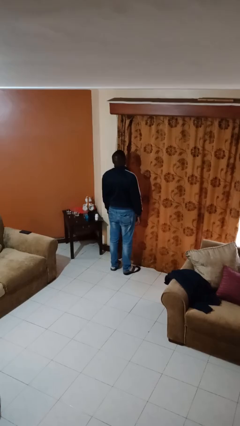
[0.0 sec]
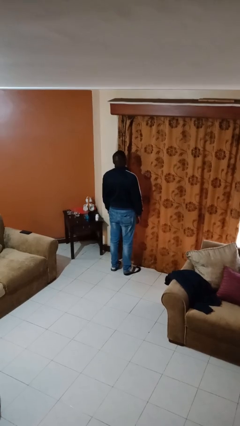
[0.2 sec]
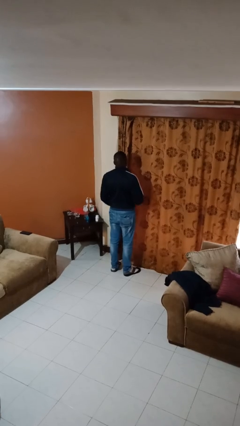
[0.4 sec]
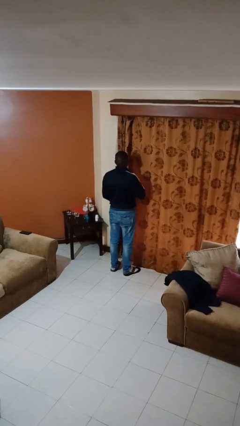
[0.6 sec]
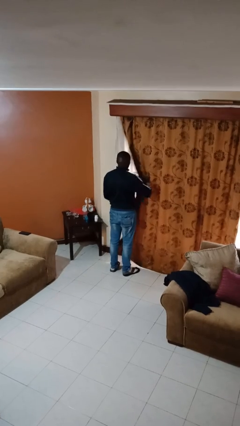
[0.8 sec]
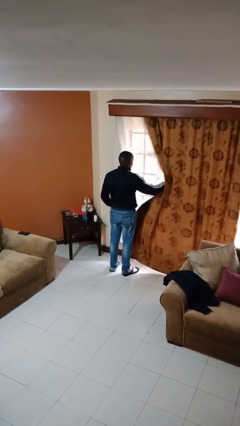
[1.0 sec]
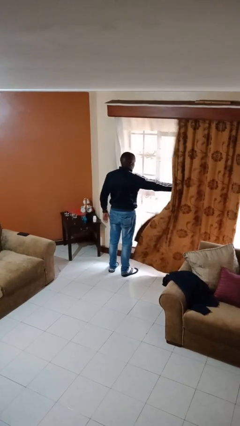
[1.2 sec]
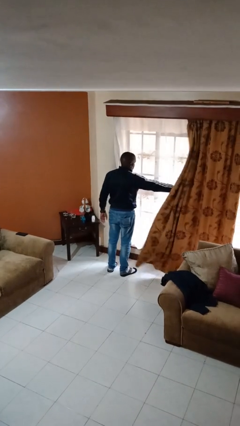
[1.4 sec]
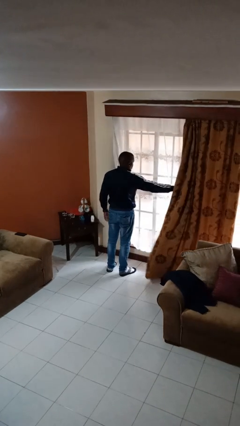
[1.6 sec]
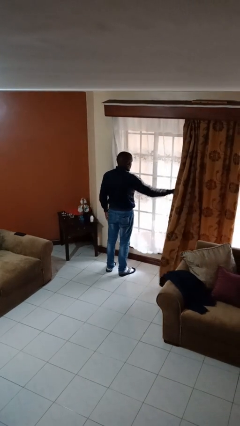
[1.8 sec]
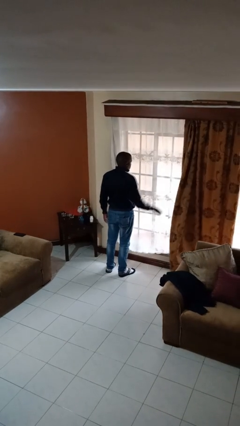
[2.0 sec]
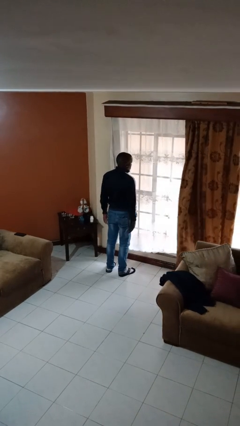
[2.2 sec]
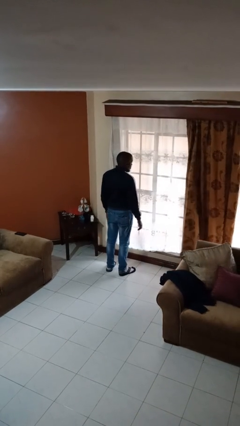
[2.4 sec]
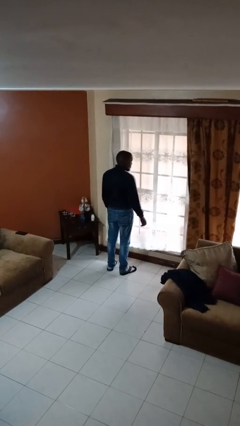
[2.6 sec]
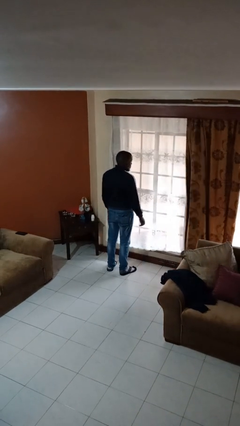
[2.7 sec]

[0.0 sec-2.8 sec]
person opens curtains

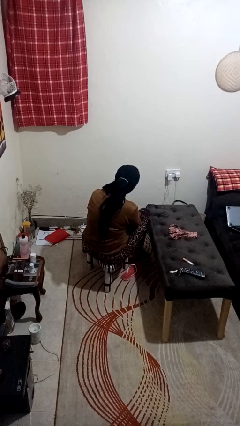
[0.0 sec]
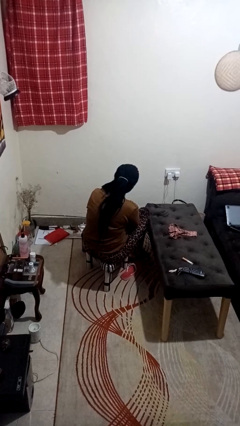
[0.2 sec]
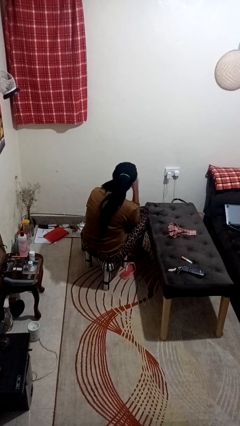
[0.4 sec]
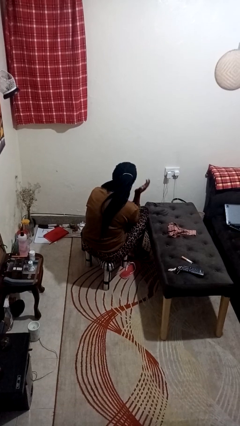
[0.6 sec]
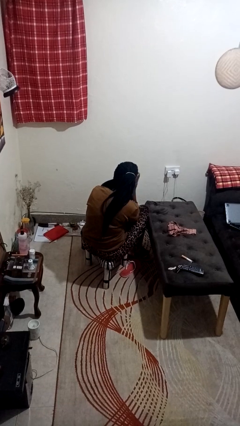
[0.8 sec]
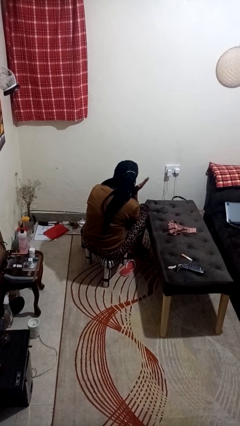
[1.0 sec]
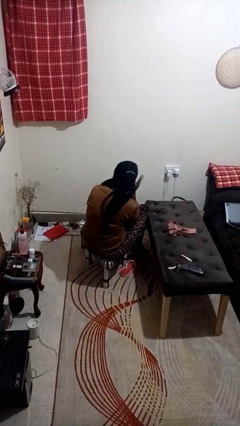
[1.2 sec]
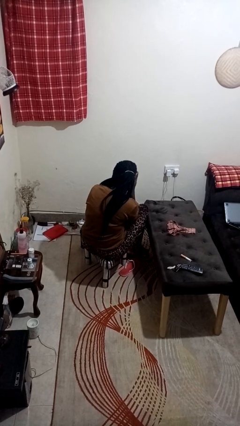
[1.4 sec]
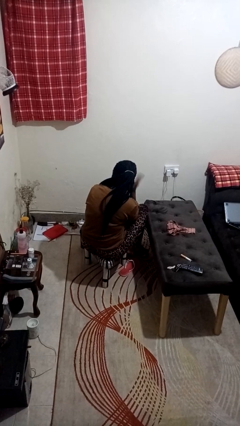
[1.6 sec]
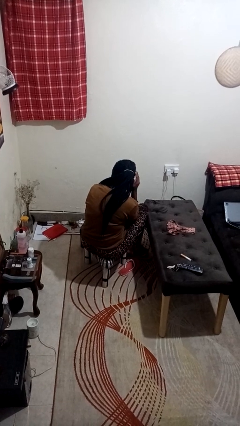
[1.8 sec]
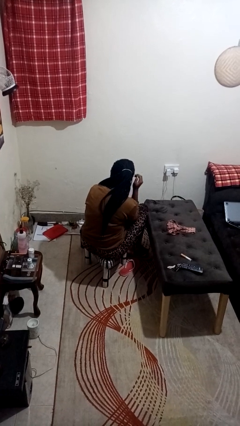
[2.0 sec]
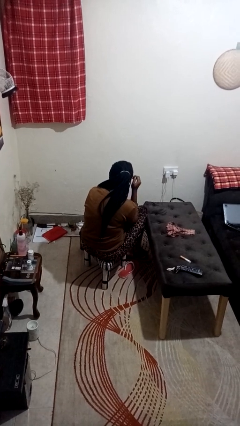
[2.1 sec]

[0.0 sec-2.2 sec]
person pats head

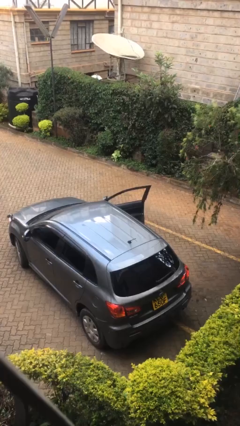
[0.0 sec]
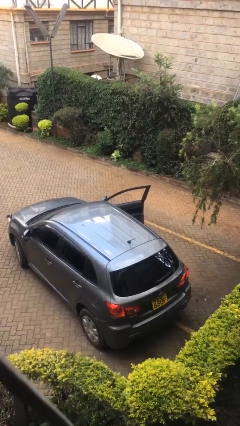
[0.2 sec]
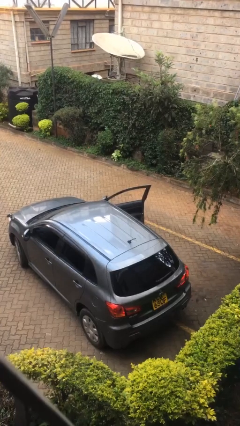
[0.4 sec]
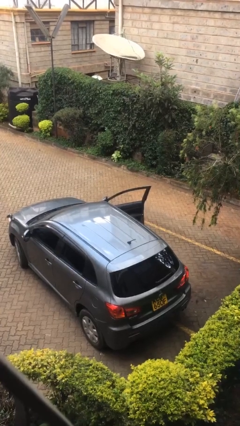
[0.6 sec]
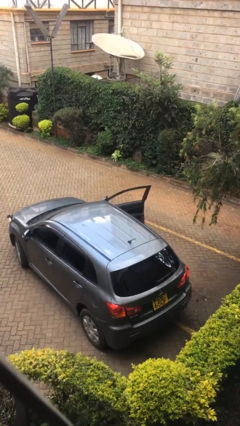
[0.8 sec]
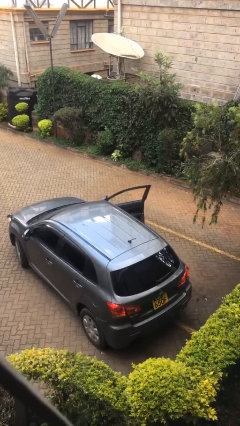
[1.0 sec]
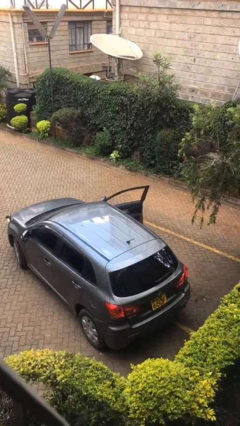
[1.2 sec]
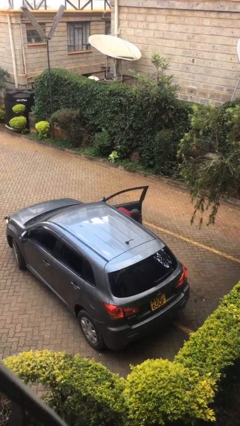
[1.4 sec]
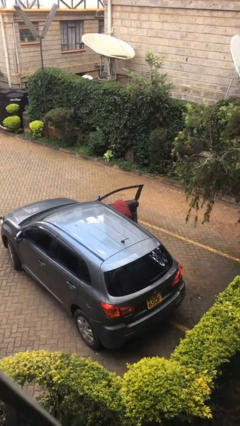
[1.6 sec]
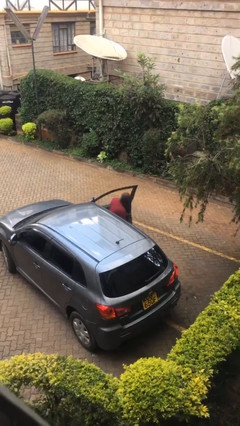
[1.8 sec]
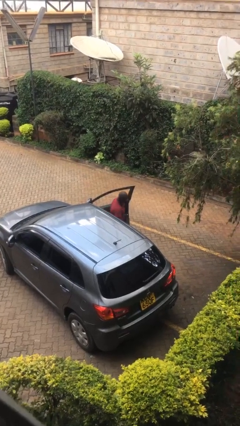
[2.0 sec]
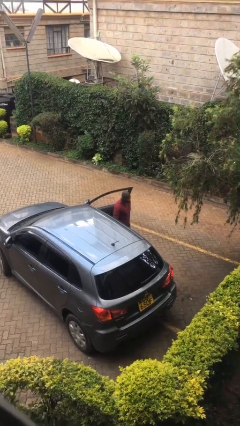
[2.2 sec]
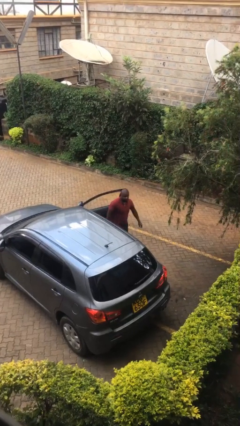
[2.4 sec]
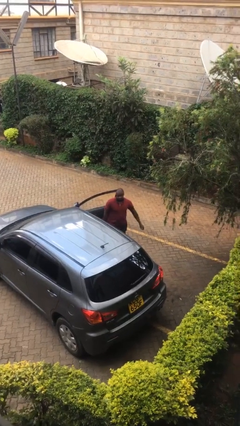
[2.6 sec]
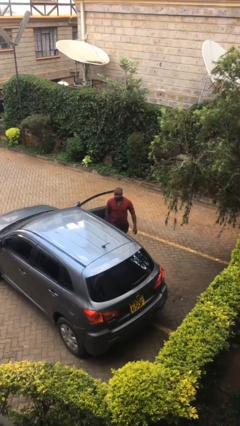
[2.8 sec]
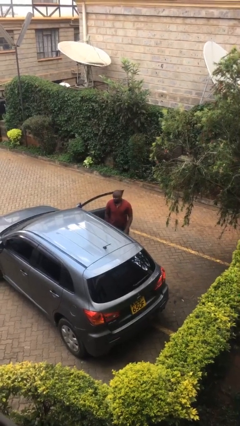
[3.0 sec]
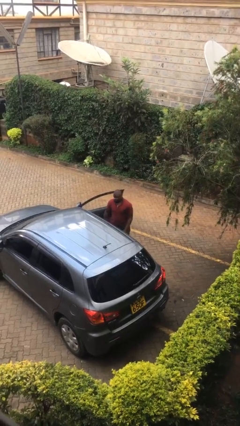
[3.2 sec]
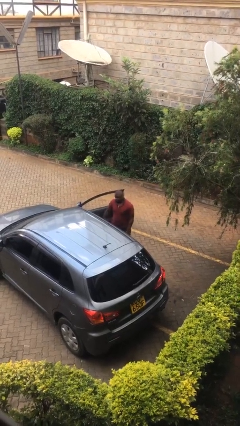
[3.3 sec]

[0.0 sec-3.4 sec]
person exits car

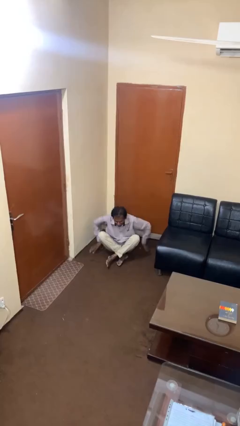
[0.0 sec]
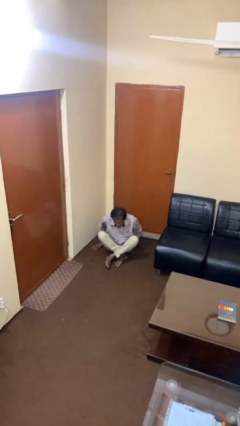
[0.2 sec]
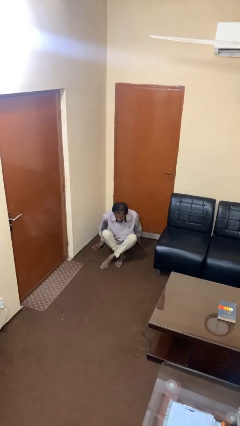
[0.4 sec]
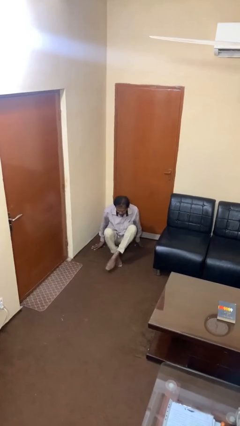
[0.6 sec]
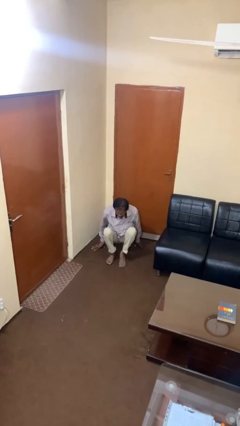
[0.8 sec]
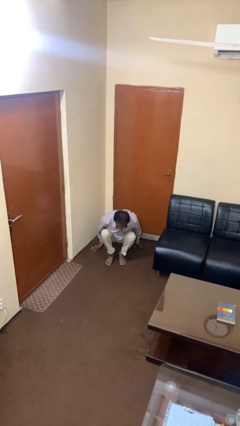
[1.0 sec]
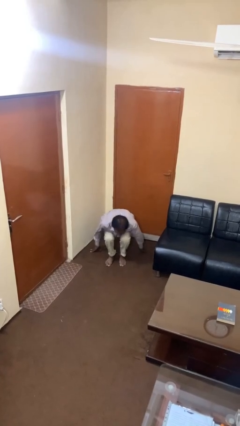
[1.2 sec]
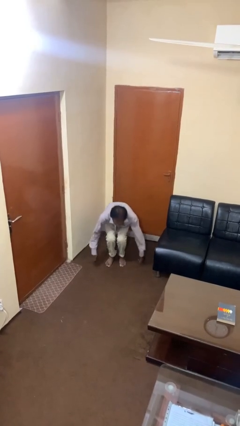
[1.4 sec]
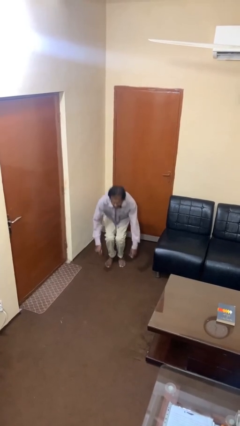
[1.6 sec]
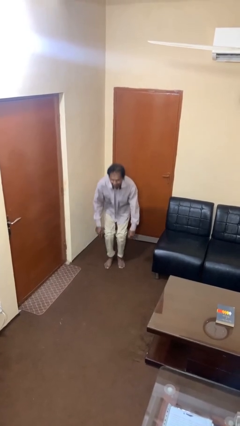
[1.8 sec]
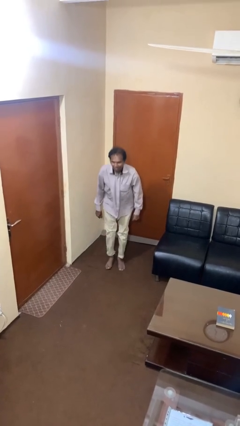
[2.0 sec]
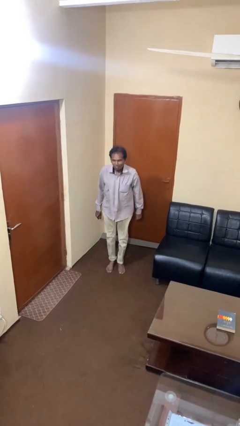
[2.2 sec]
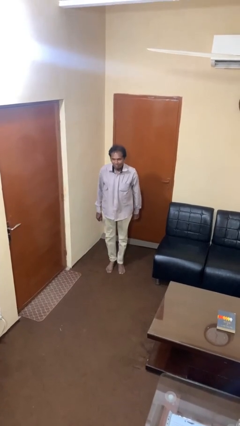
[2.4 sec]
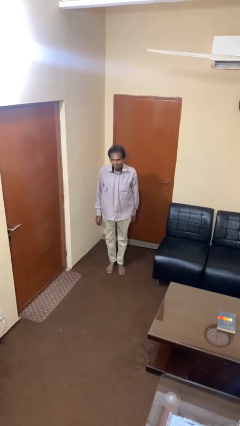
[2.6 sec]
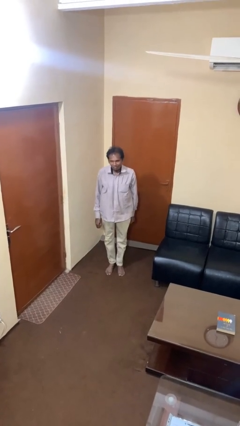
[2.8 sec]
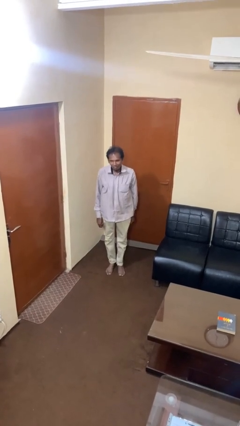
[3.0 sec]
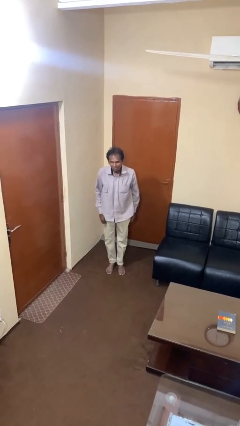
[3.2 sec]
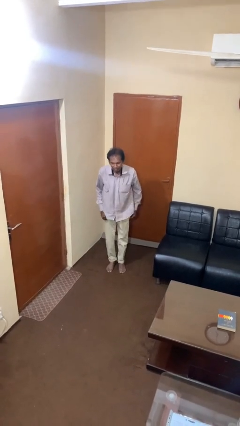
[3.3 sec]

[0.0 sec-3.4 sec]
person stands up from floor

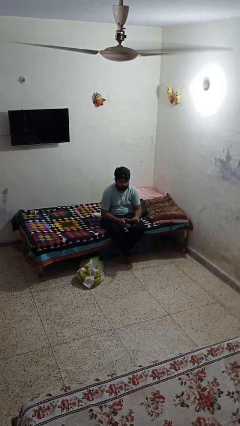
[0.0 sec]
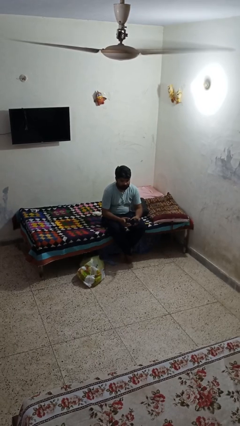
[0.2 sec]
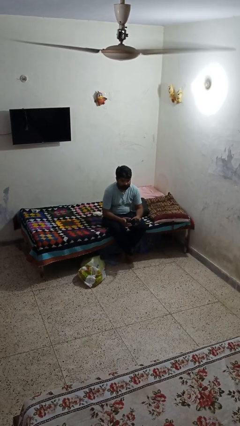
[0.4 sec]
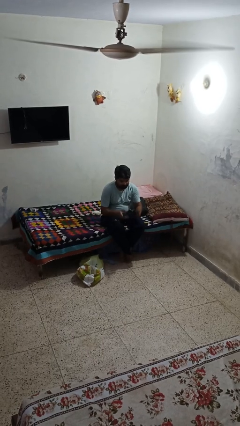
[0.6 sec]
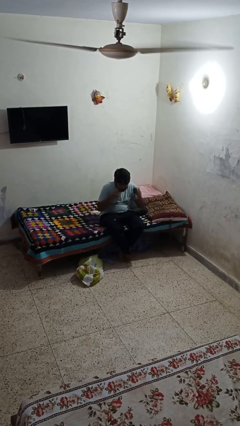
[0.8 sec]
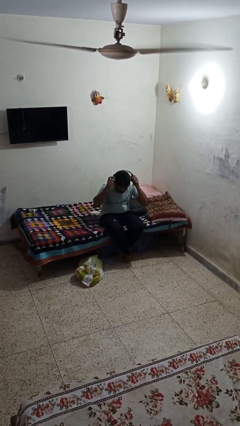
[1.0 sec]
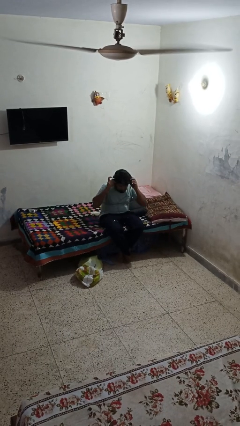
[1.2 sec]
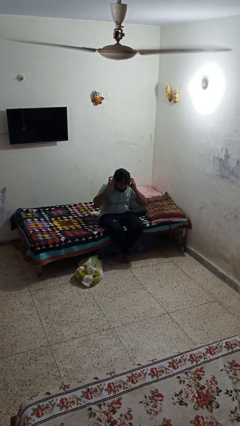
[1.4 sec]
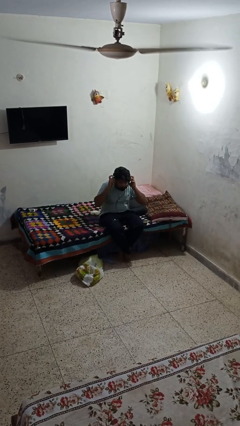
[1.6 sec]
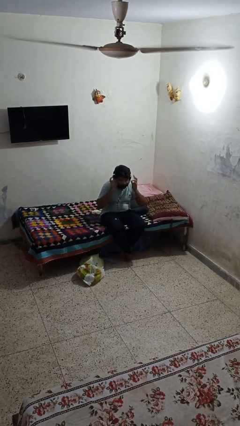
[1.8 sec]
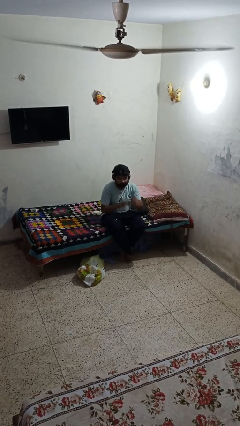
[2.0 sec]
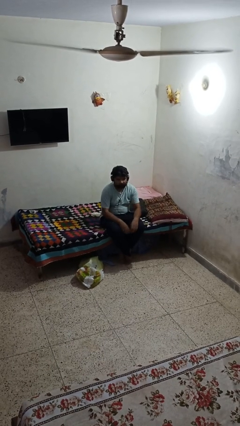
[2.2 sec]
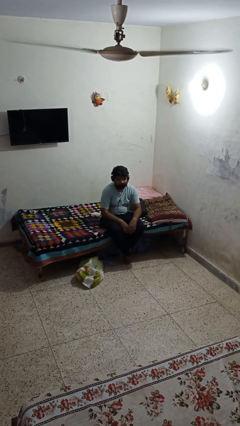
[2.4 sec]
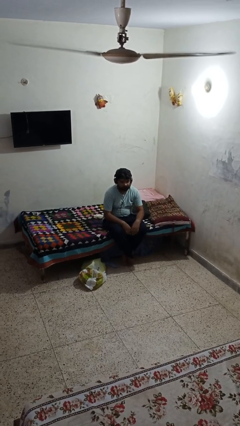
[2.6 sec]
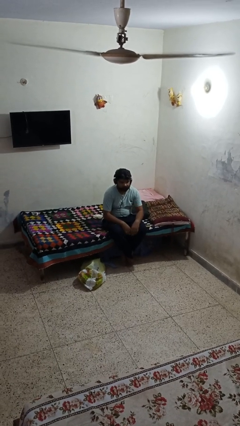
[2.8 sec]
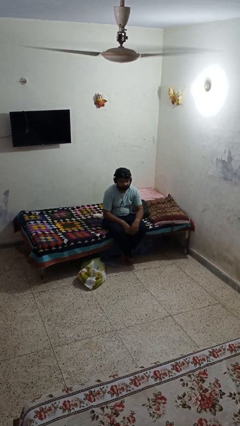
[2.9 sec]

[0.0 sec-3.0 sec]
person puts on headphones

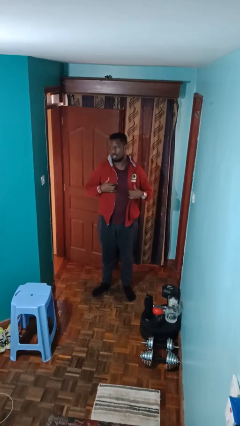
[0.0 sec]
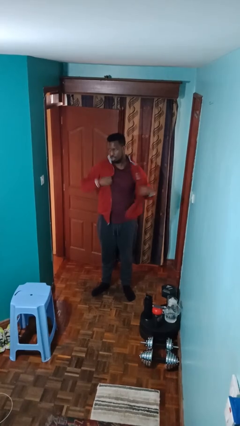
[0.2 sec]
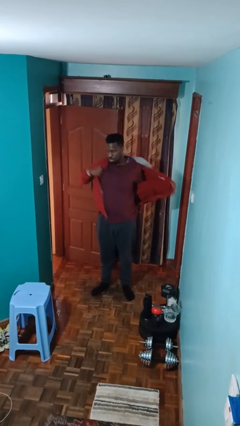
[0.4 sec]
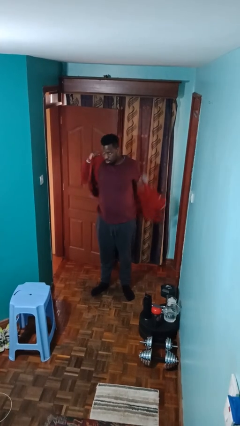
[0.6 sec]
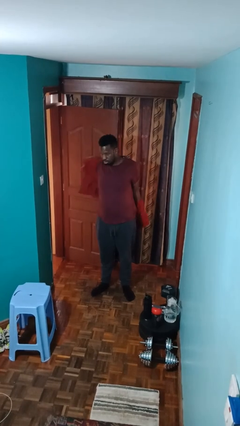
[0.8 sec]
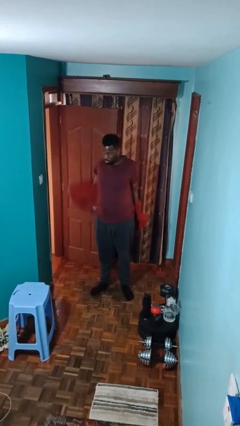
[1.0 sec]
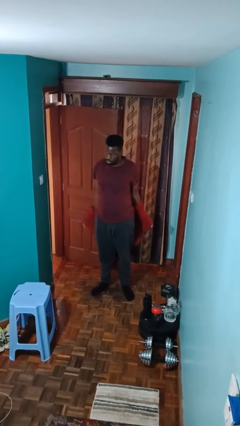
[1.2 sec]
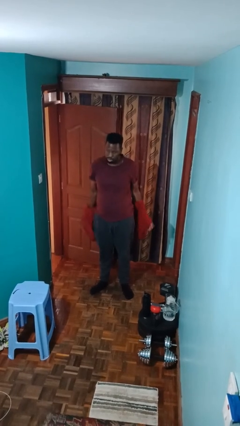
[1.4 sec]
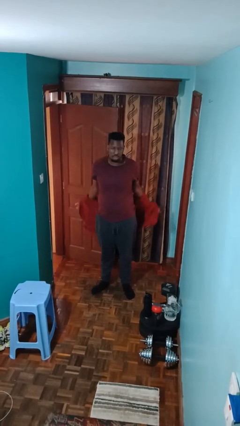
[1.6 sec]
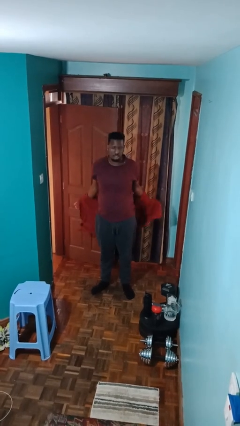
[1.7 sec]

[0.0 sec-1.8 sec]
person takes off jacket

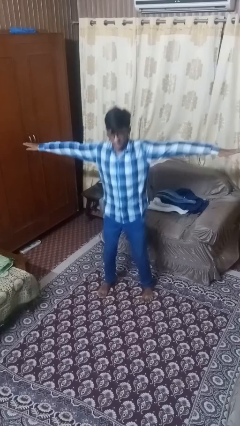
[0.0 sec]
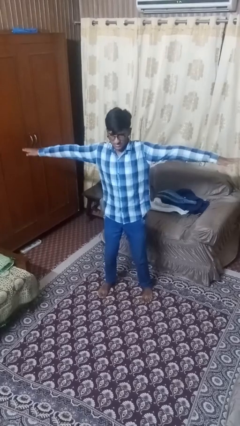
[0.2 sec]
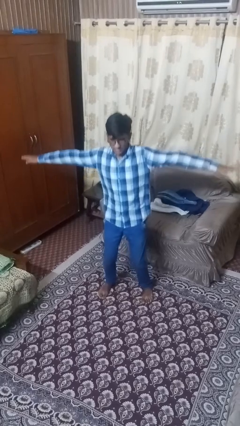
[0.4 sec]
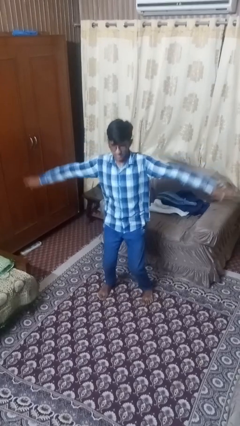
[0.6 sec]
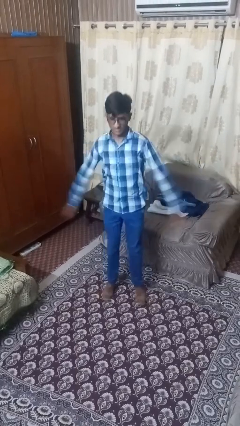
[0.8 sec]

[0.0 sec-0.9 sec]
person exercises with jumping jacks

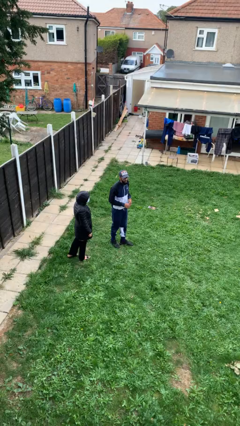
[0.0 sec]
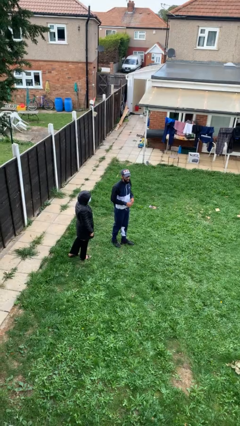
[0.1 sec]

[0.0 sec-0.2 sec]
person talks to person
